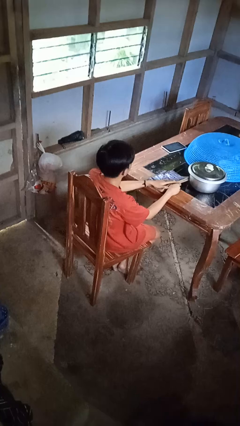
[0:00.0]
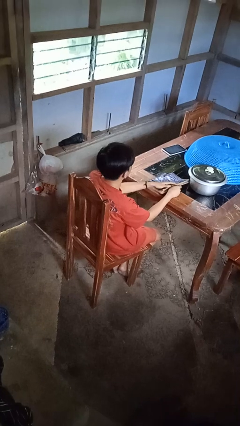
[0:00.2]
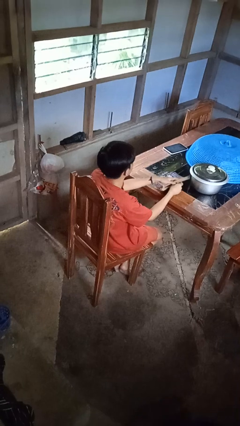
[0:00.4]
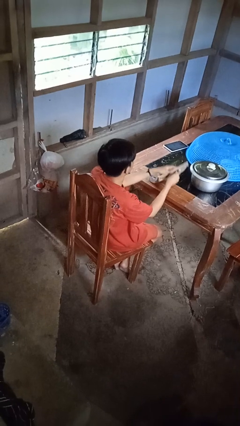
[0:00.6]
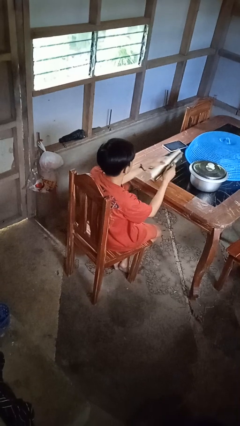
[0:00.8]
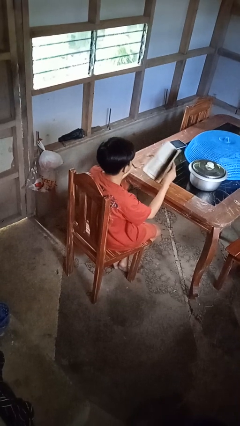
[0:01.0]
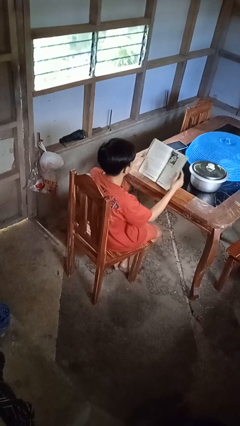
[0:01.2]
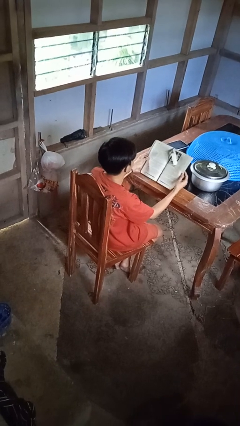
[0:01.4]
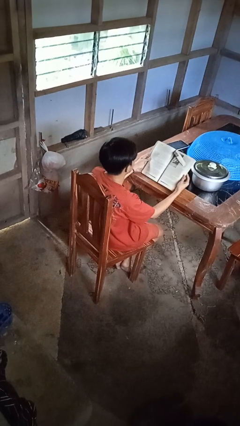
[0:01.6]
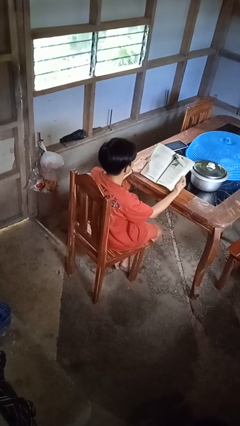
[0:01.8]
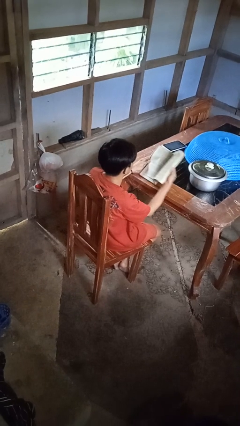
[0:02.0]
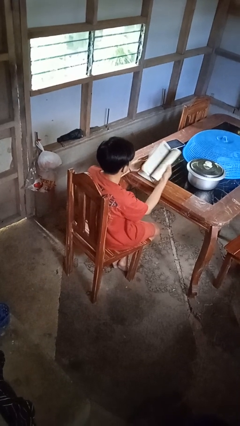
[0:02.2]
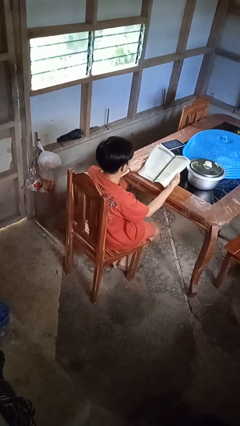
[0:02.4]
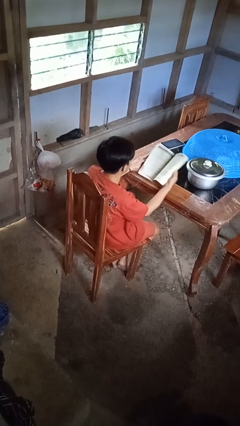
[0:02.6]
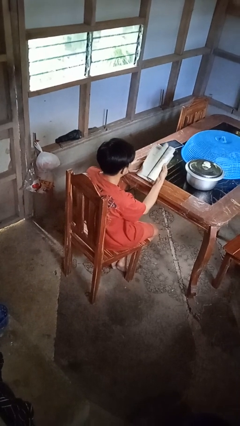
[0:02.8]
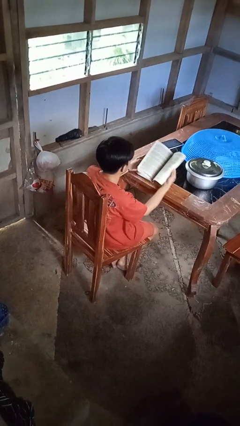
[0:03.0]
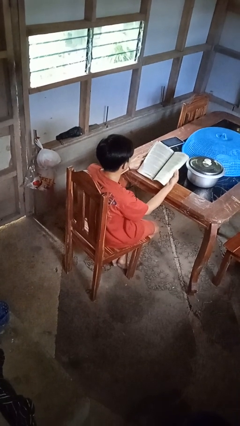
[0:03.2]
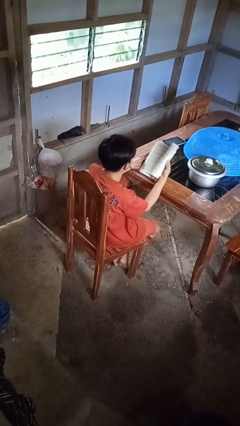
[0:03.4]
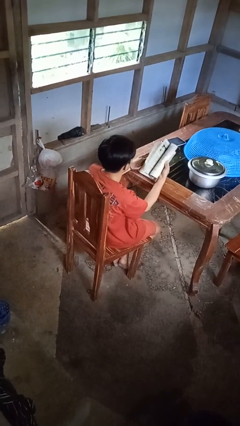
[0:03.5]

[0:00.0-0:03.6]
person reads book

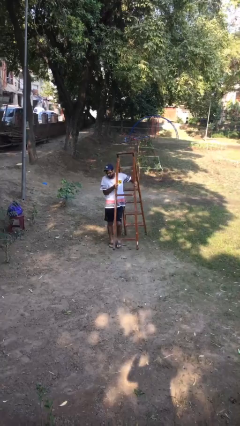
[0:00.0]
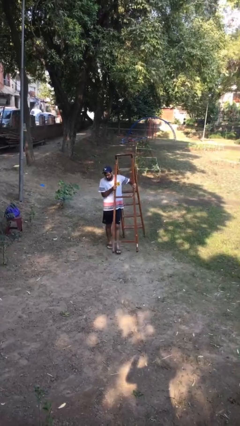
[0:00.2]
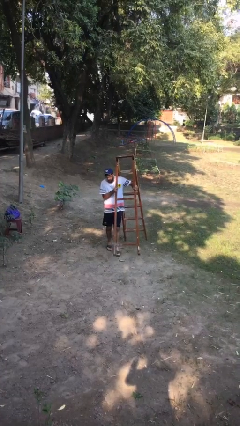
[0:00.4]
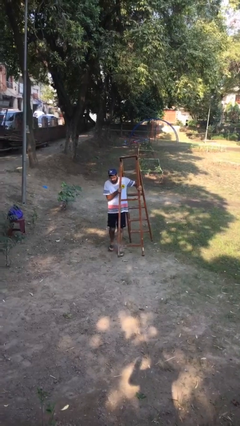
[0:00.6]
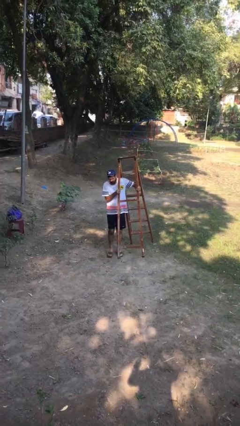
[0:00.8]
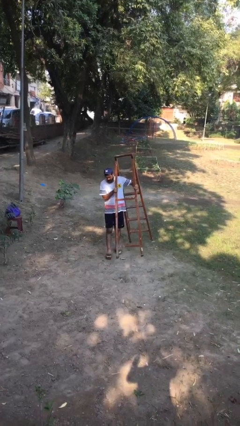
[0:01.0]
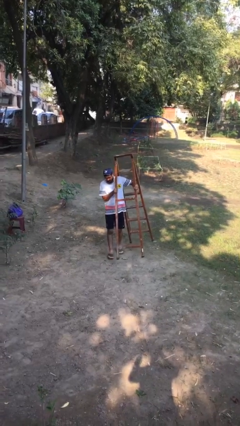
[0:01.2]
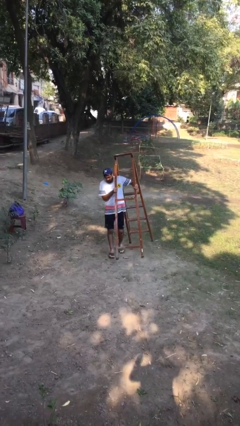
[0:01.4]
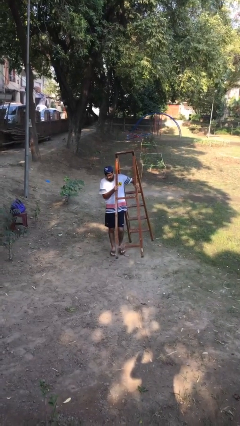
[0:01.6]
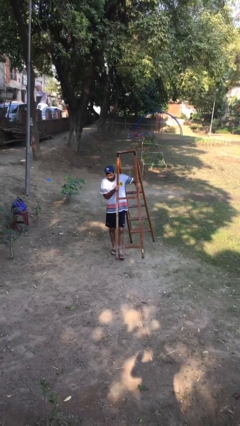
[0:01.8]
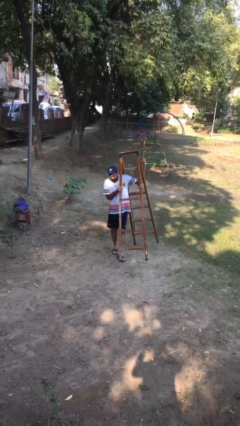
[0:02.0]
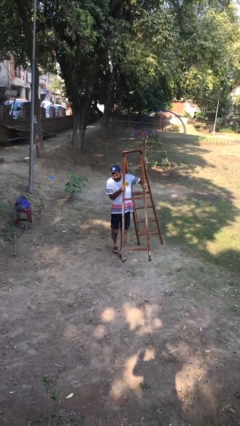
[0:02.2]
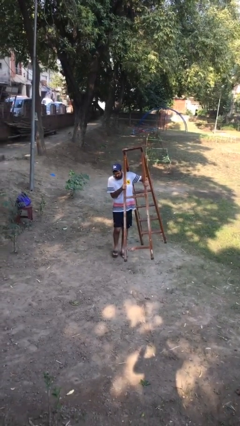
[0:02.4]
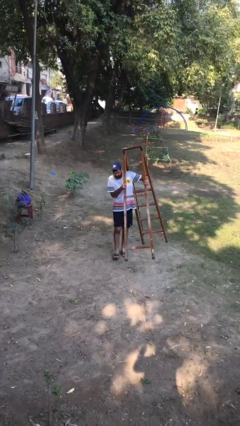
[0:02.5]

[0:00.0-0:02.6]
person carries heavy object

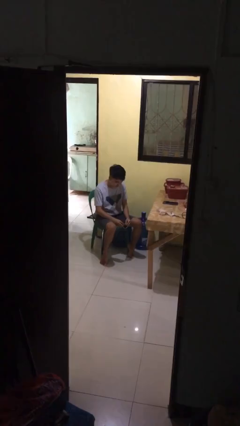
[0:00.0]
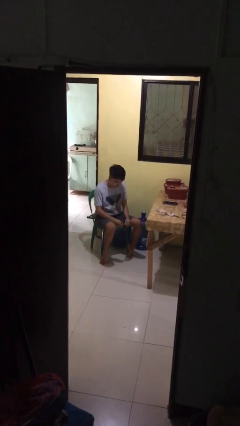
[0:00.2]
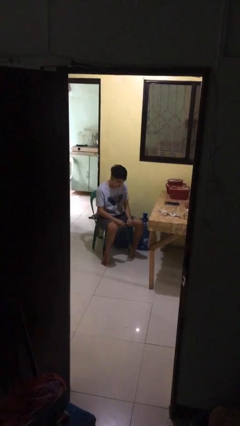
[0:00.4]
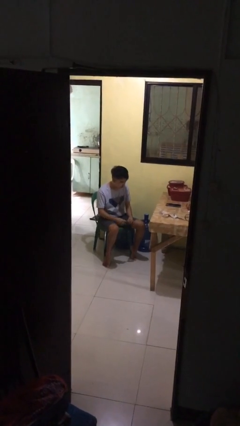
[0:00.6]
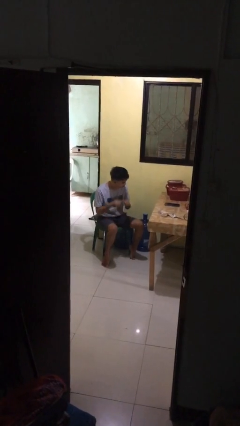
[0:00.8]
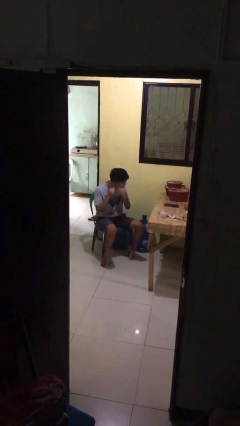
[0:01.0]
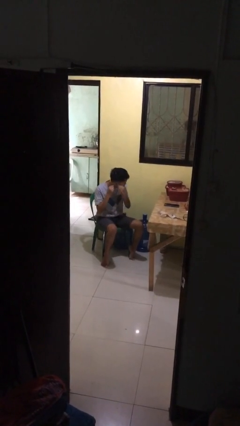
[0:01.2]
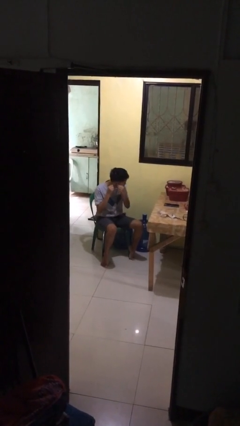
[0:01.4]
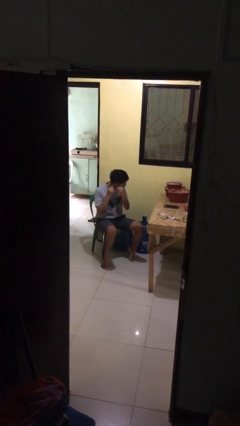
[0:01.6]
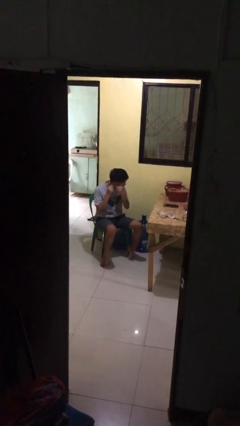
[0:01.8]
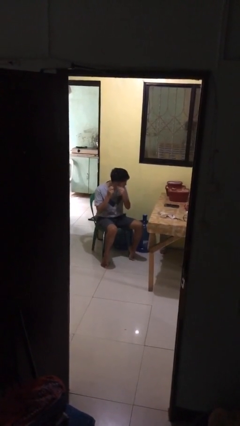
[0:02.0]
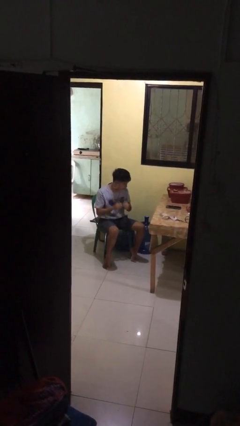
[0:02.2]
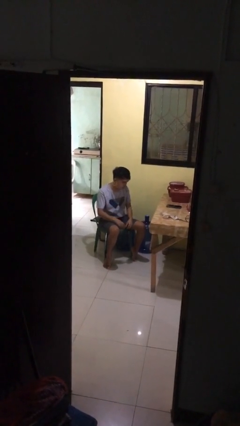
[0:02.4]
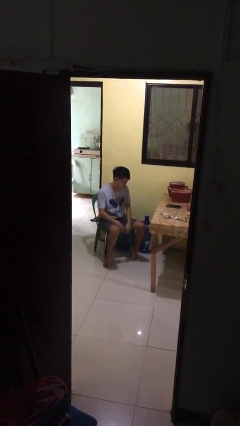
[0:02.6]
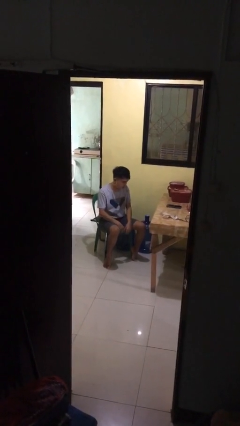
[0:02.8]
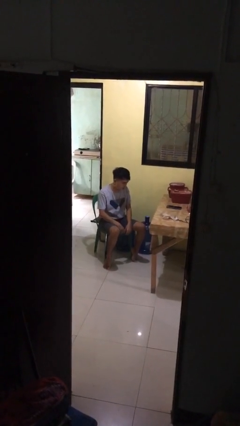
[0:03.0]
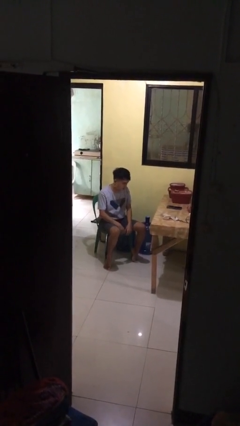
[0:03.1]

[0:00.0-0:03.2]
person puts on earrings

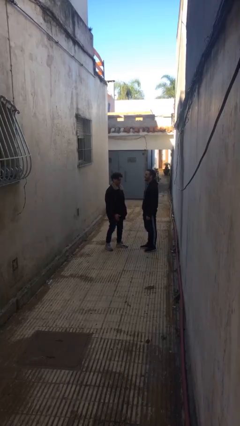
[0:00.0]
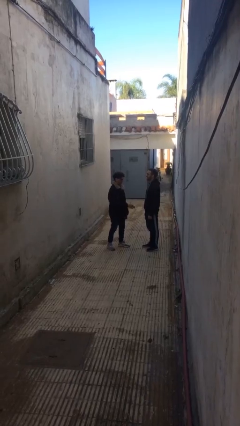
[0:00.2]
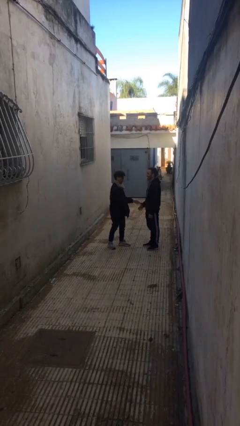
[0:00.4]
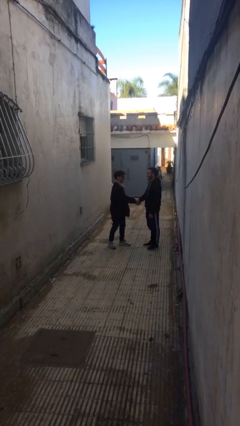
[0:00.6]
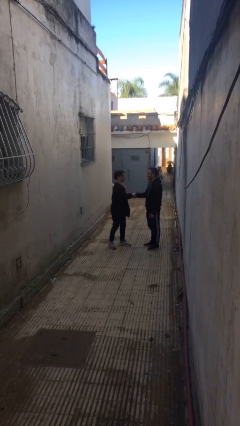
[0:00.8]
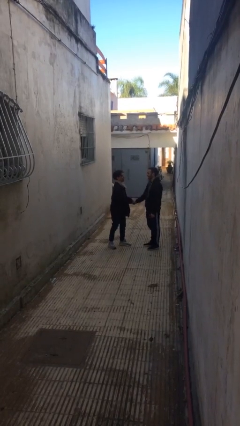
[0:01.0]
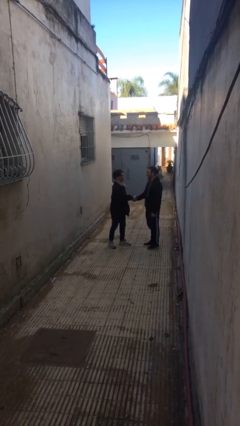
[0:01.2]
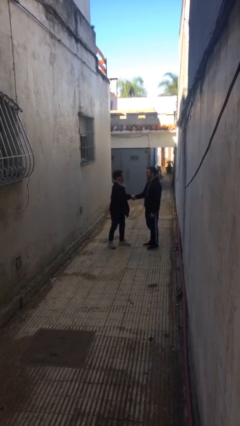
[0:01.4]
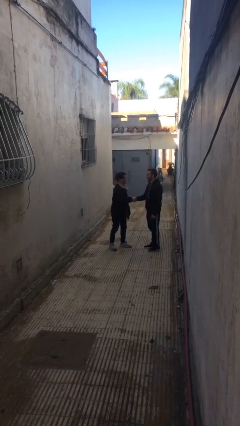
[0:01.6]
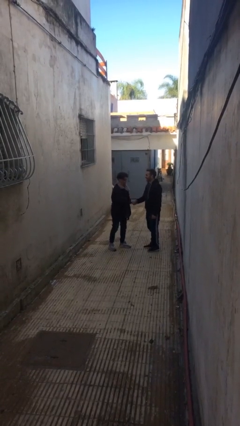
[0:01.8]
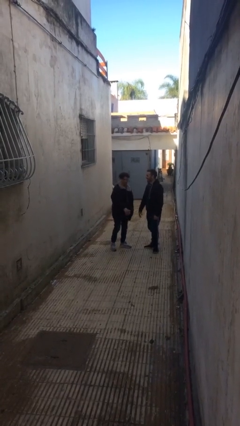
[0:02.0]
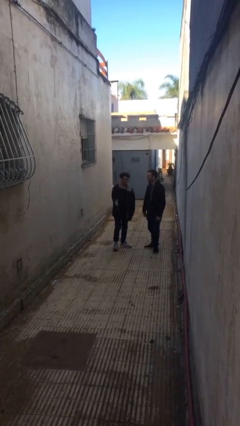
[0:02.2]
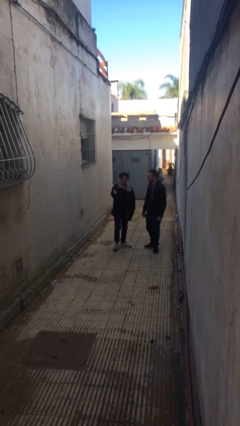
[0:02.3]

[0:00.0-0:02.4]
person shakes hand

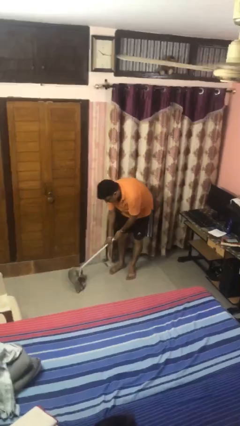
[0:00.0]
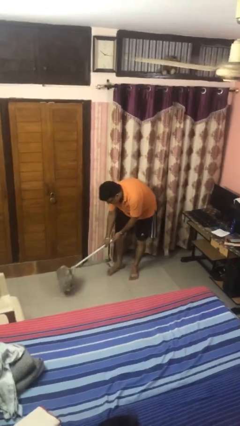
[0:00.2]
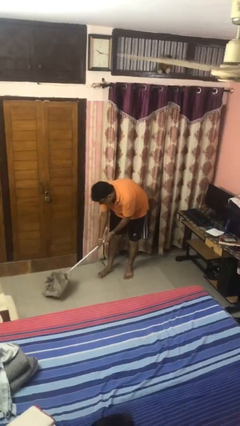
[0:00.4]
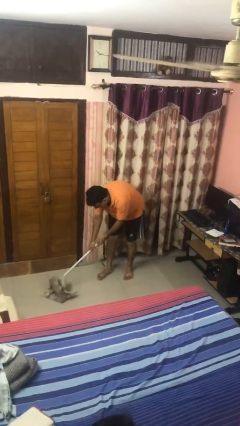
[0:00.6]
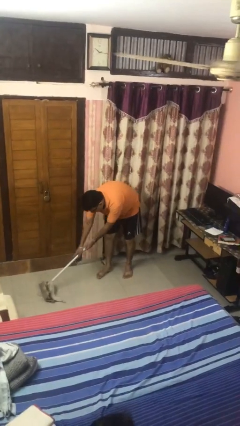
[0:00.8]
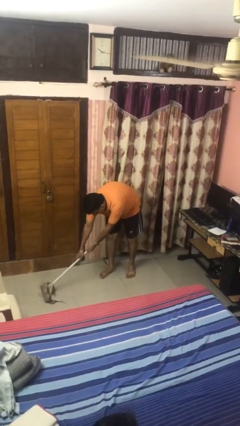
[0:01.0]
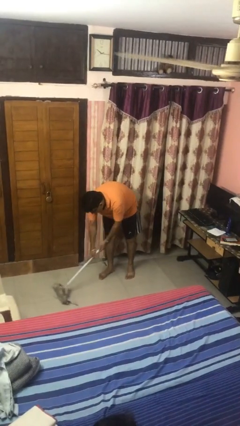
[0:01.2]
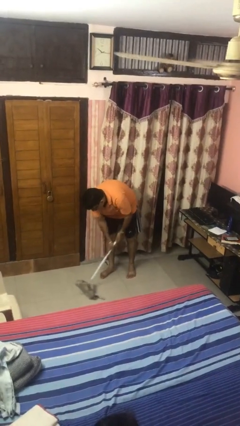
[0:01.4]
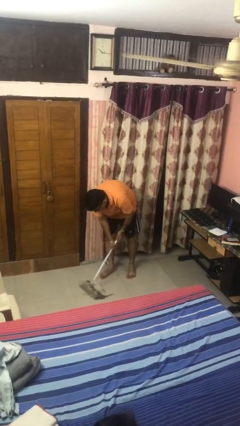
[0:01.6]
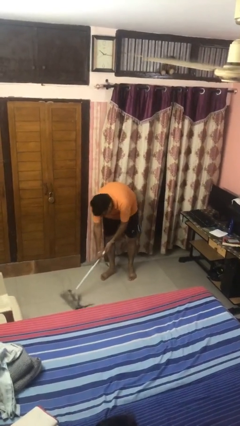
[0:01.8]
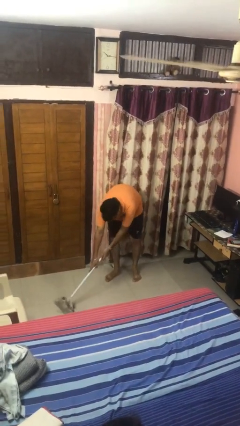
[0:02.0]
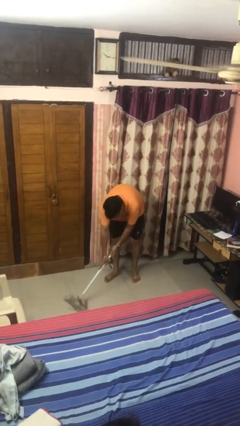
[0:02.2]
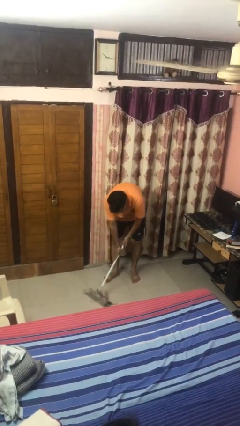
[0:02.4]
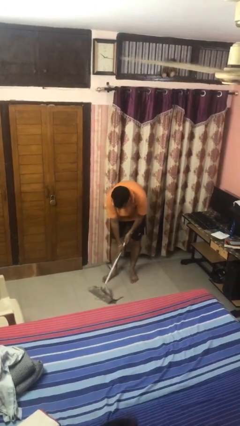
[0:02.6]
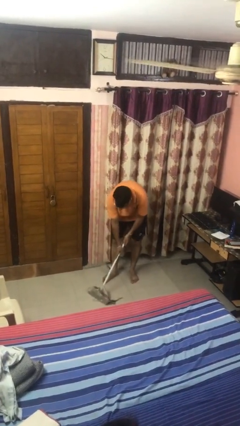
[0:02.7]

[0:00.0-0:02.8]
person mops

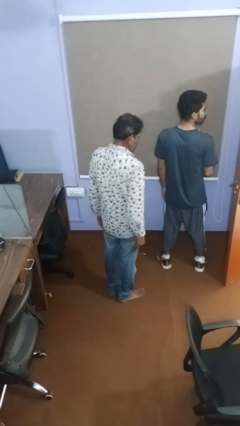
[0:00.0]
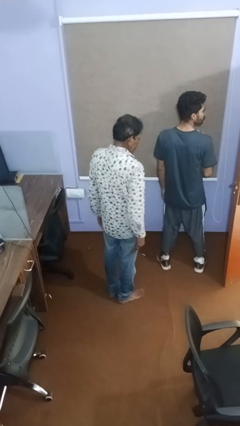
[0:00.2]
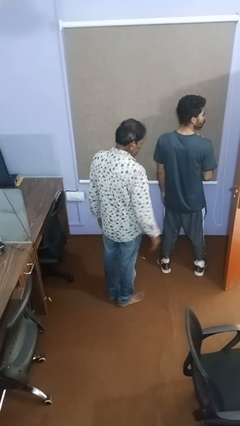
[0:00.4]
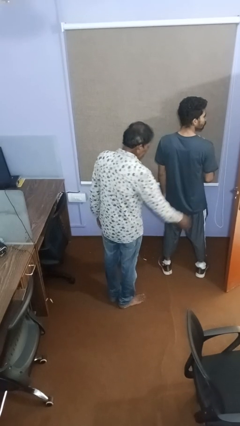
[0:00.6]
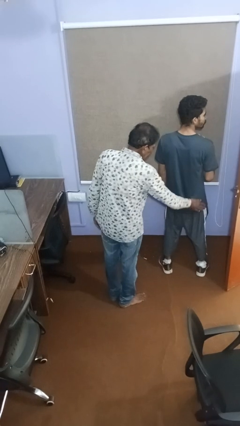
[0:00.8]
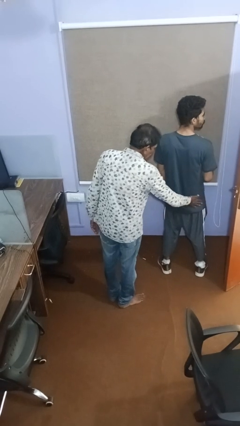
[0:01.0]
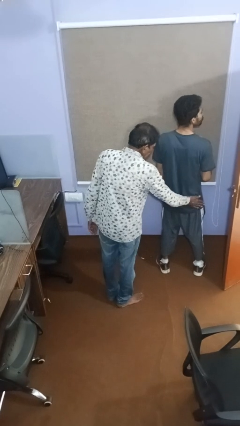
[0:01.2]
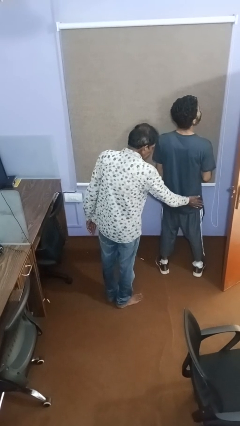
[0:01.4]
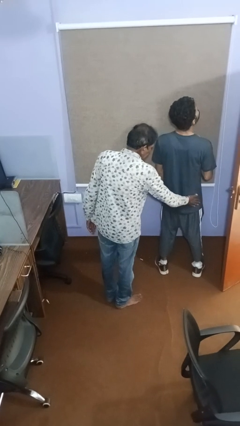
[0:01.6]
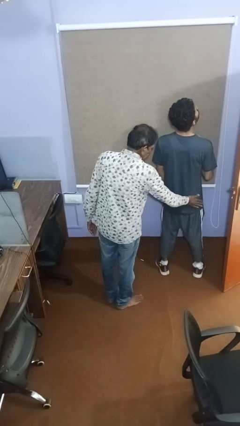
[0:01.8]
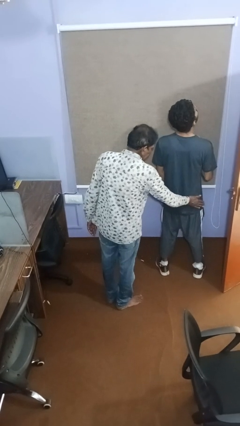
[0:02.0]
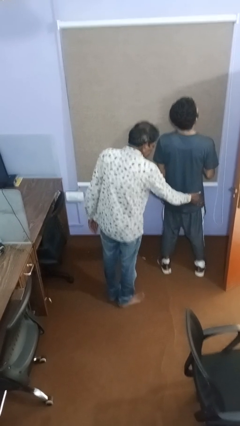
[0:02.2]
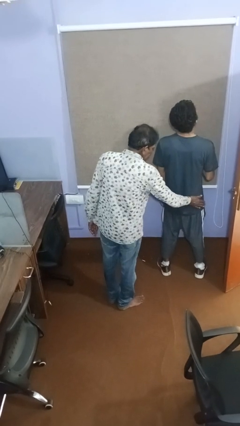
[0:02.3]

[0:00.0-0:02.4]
person touches back of person

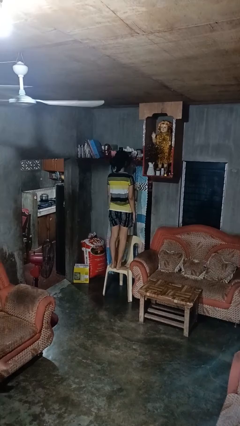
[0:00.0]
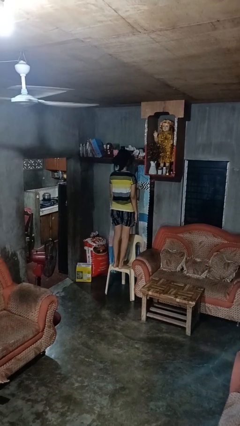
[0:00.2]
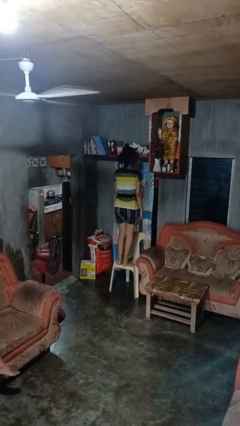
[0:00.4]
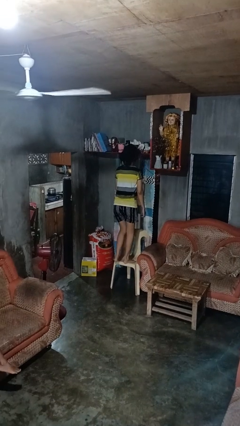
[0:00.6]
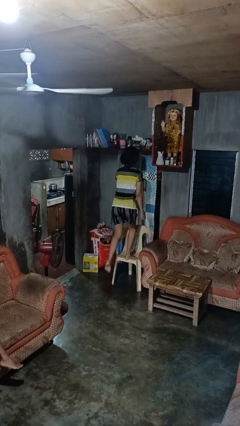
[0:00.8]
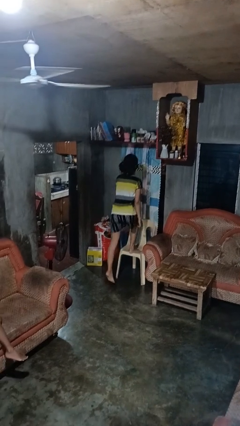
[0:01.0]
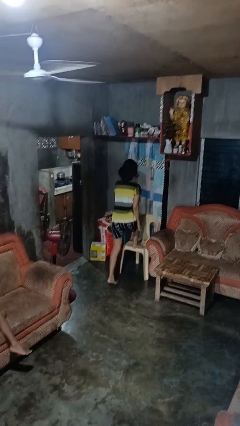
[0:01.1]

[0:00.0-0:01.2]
person climbs off chair
